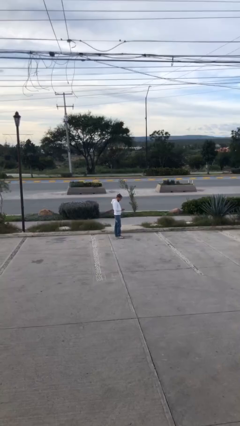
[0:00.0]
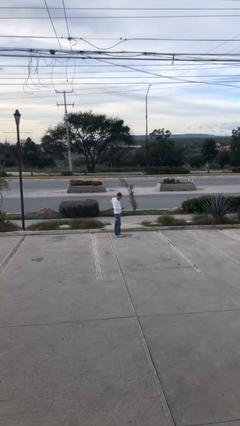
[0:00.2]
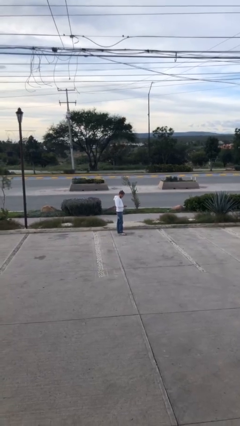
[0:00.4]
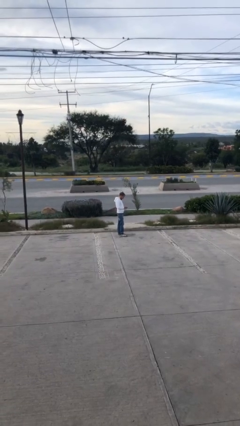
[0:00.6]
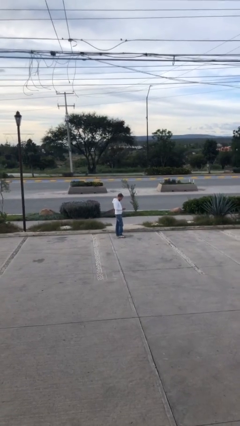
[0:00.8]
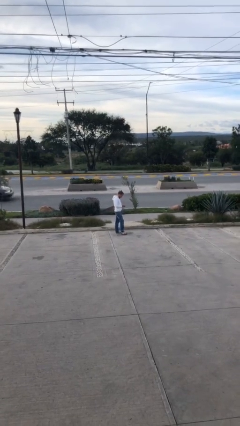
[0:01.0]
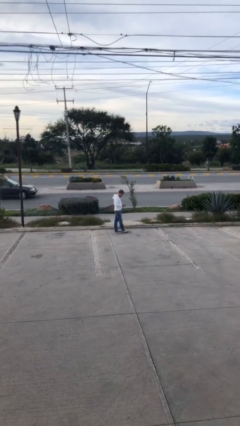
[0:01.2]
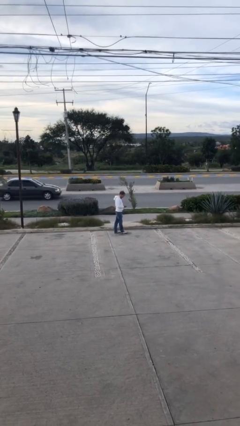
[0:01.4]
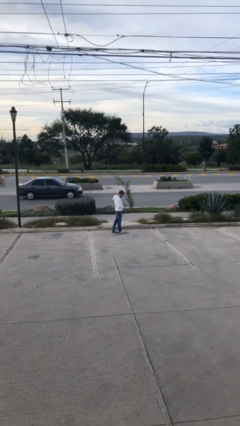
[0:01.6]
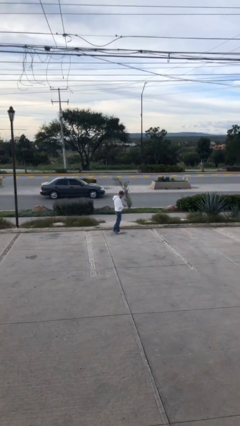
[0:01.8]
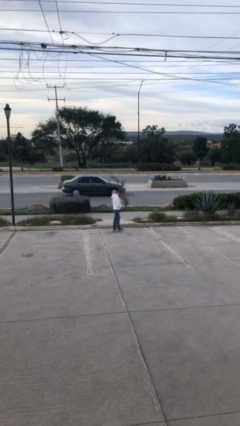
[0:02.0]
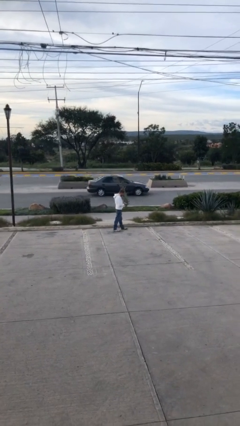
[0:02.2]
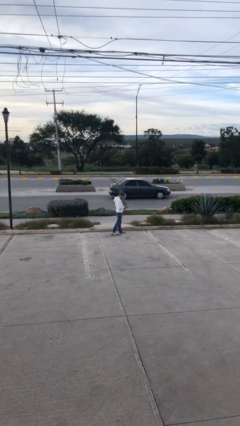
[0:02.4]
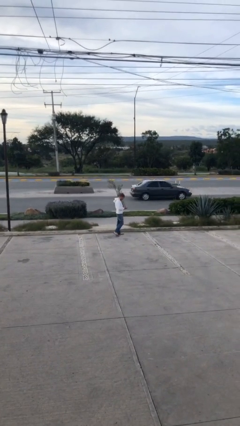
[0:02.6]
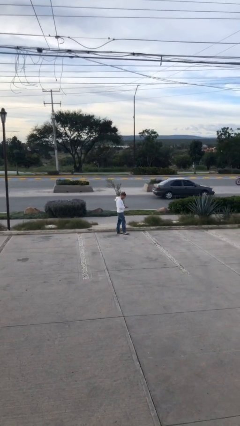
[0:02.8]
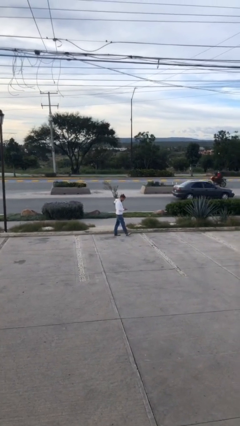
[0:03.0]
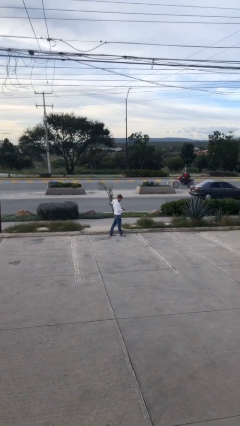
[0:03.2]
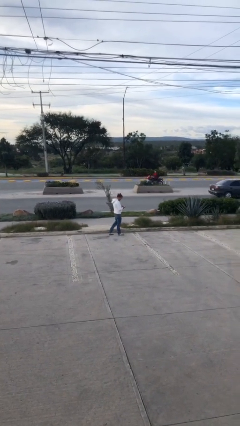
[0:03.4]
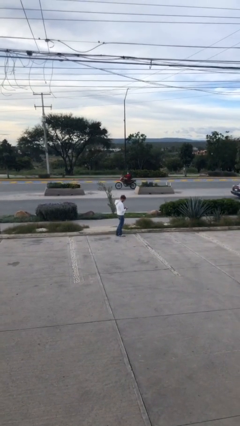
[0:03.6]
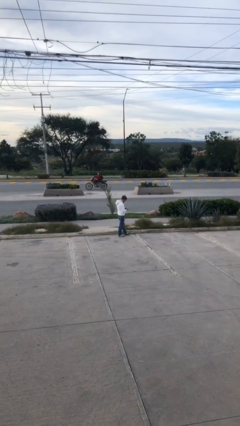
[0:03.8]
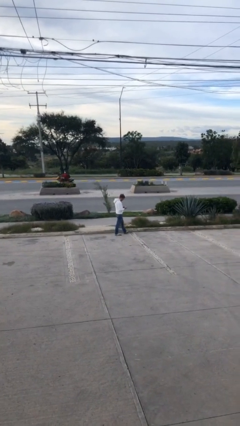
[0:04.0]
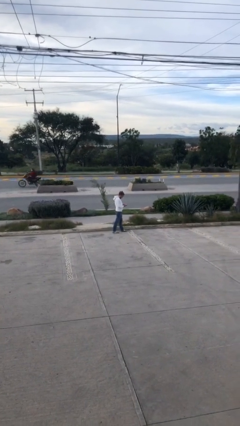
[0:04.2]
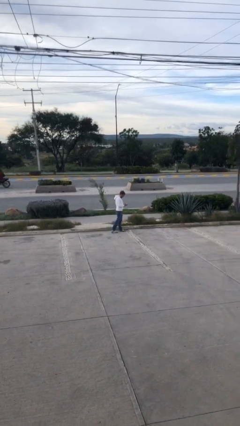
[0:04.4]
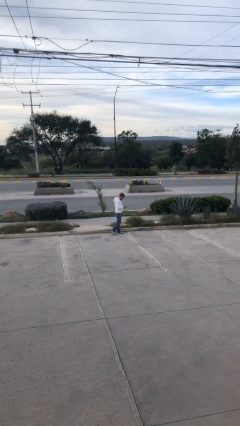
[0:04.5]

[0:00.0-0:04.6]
person texts on phone

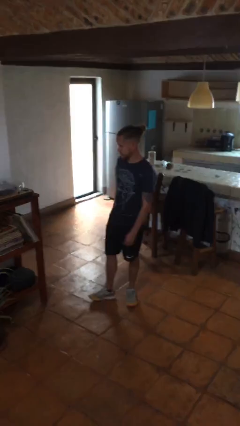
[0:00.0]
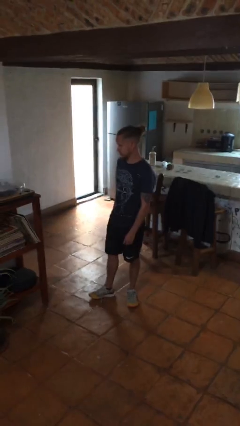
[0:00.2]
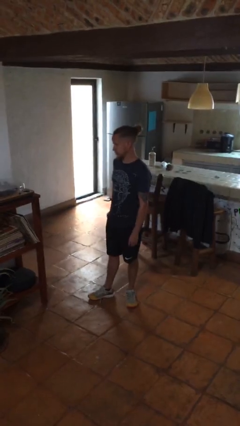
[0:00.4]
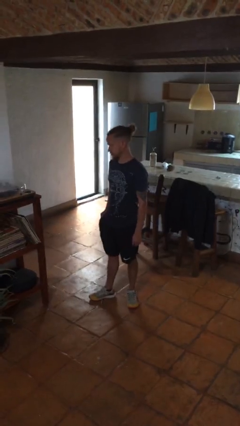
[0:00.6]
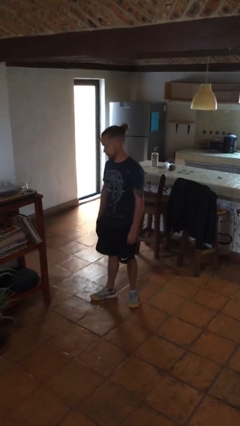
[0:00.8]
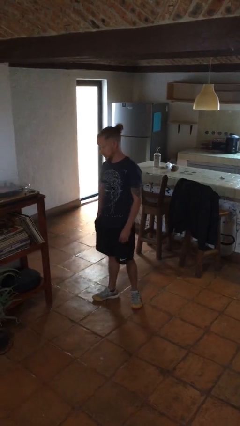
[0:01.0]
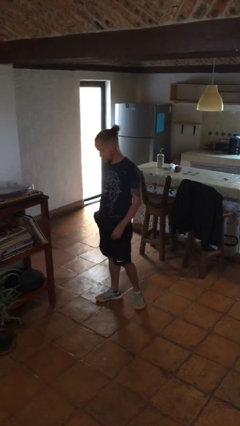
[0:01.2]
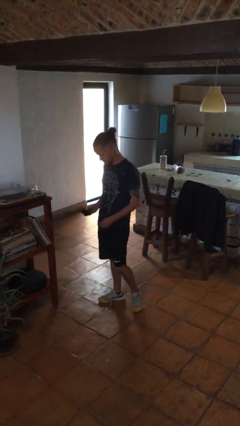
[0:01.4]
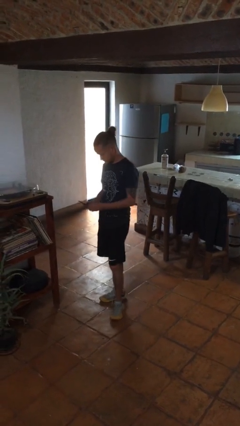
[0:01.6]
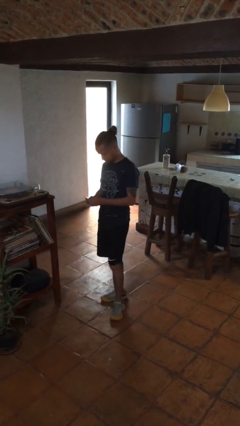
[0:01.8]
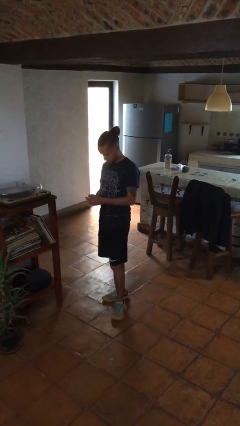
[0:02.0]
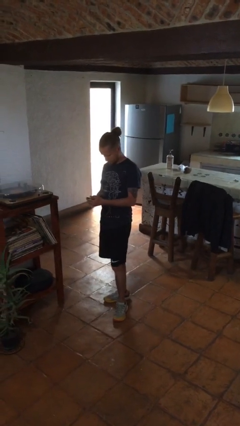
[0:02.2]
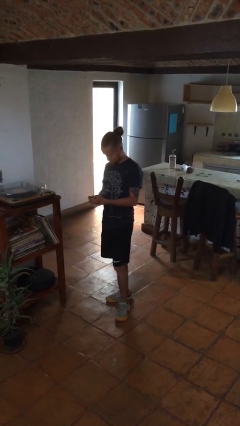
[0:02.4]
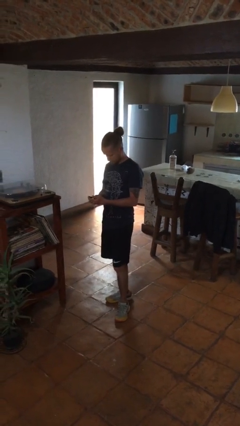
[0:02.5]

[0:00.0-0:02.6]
person takes phone from pocket

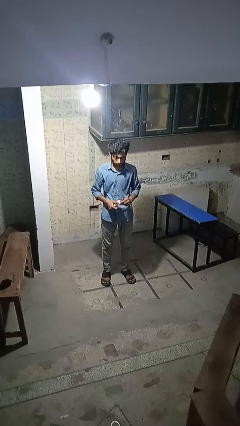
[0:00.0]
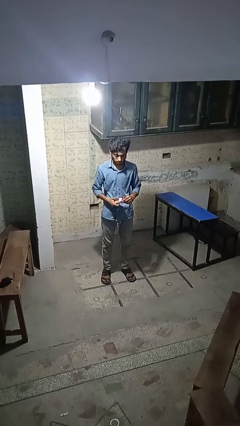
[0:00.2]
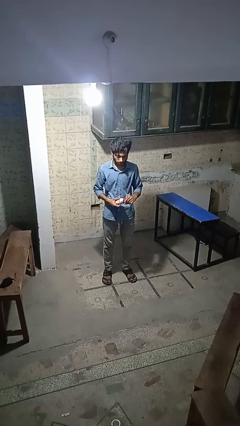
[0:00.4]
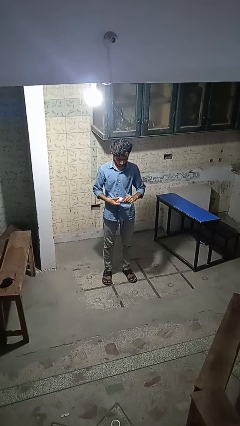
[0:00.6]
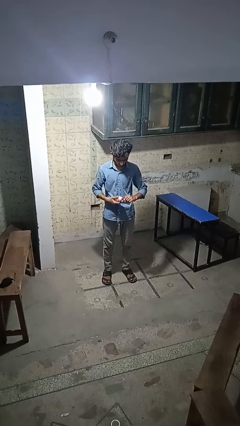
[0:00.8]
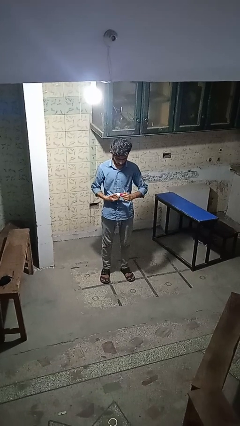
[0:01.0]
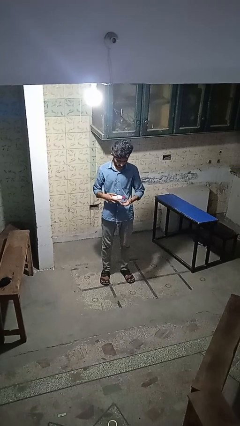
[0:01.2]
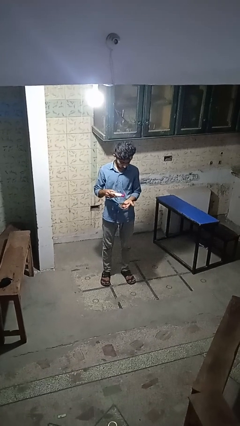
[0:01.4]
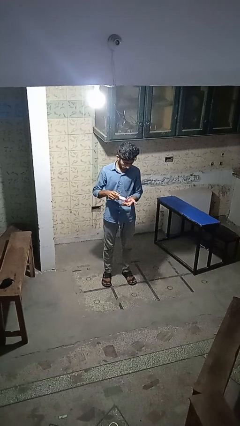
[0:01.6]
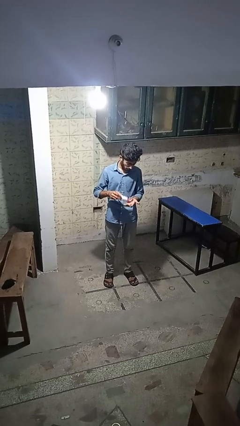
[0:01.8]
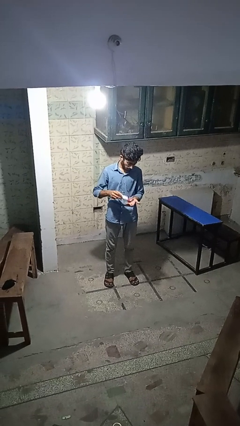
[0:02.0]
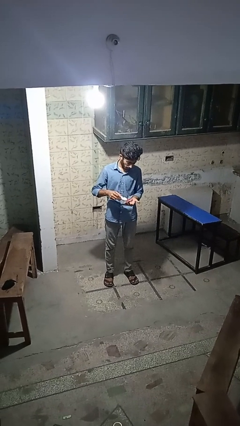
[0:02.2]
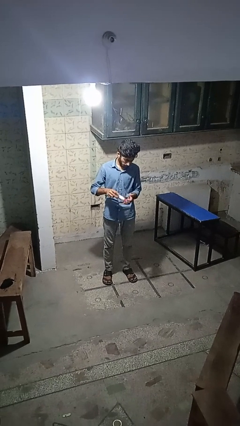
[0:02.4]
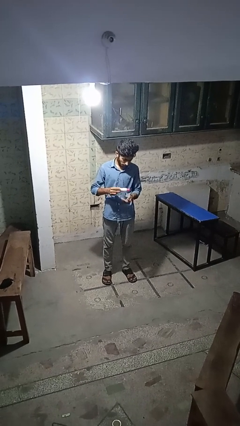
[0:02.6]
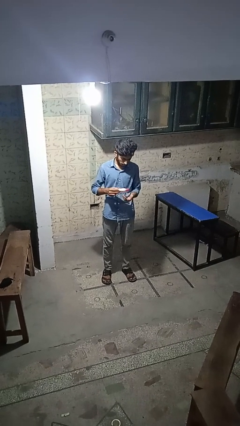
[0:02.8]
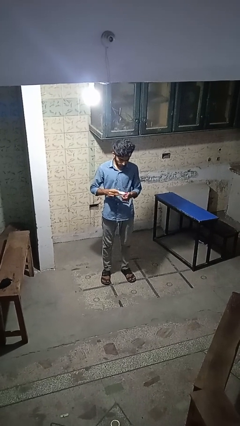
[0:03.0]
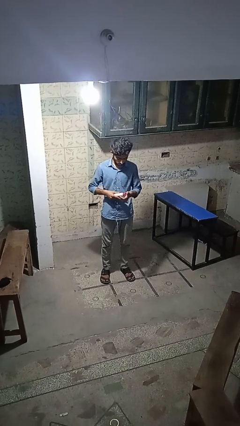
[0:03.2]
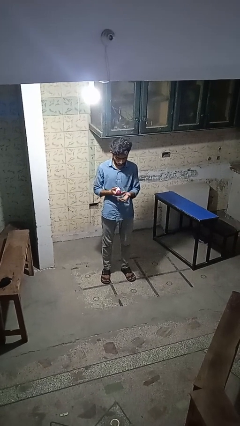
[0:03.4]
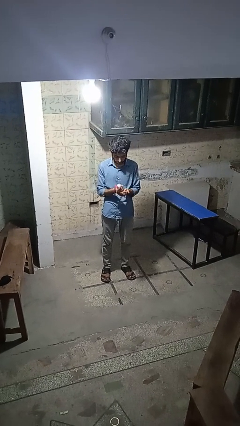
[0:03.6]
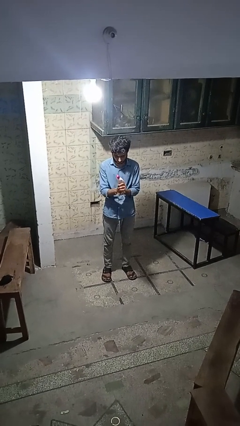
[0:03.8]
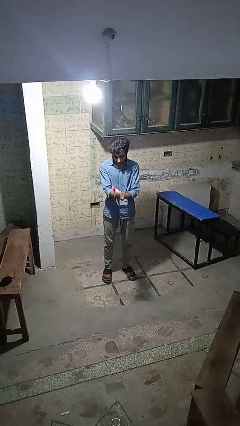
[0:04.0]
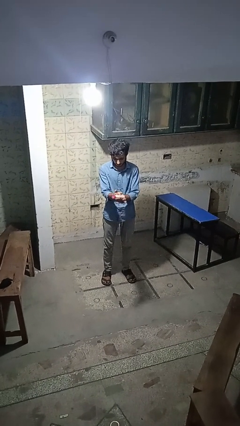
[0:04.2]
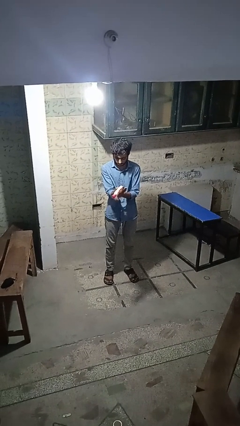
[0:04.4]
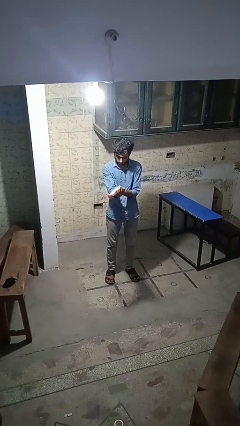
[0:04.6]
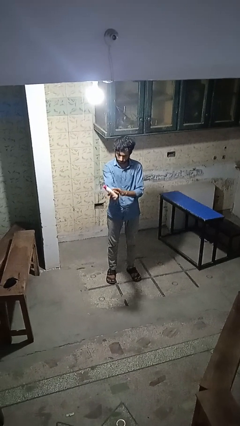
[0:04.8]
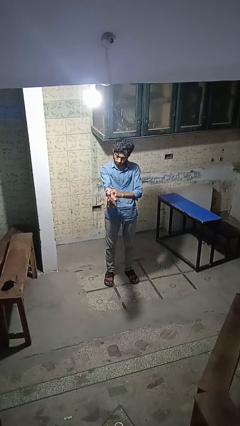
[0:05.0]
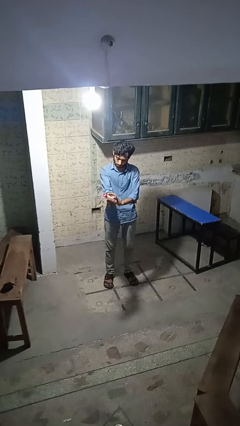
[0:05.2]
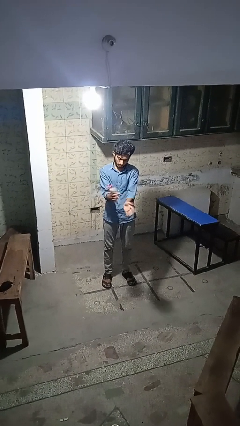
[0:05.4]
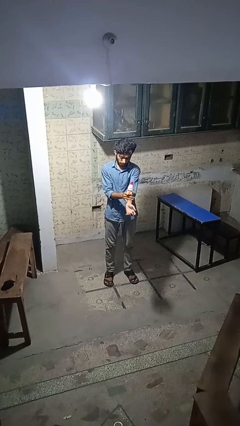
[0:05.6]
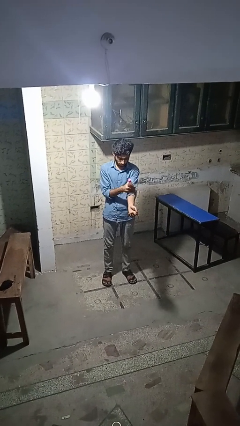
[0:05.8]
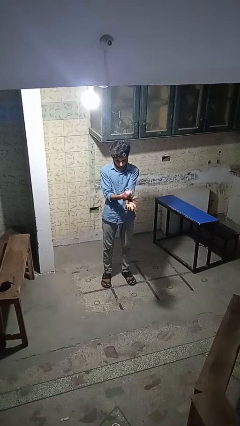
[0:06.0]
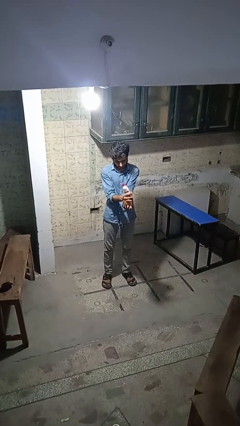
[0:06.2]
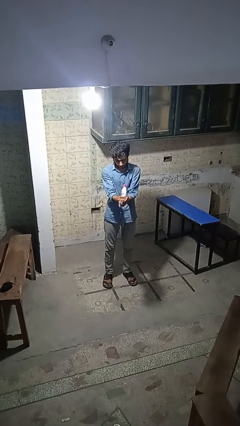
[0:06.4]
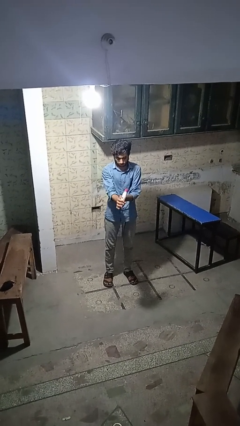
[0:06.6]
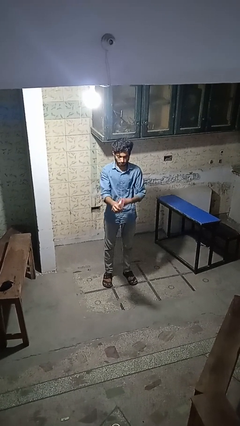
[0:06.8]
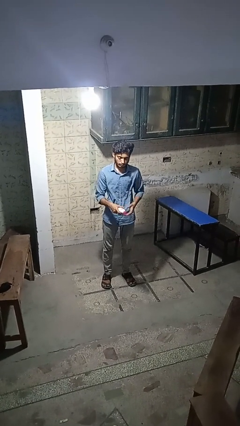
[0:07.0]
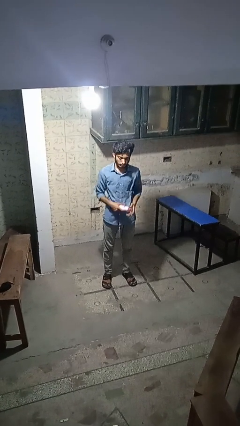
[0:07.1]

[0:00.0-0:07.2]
person applies sunscreen

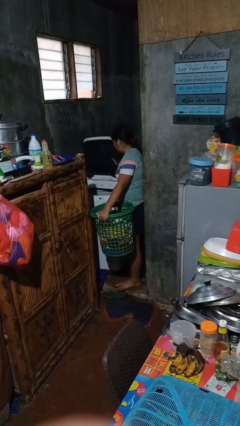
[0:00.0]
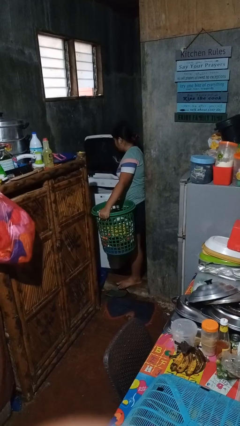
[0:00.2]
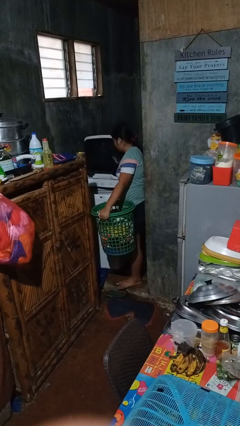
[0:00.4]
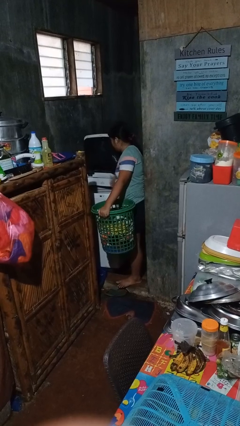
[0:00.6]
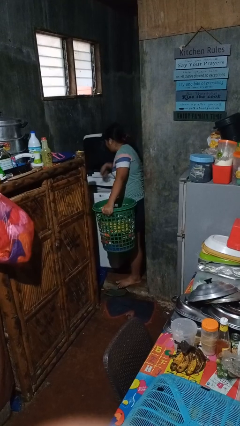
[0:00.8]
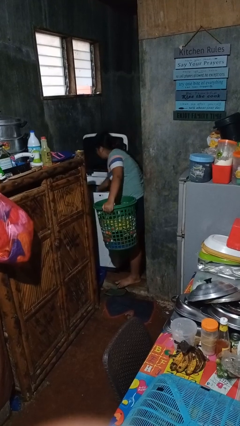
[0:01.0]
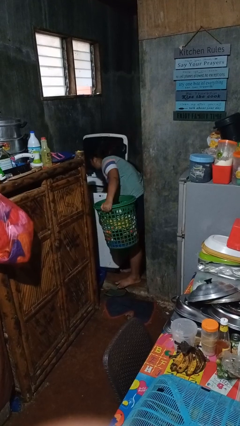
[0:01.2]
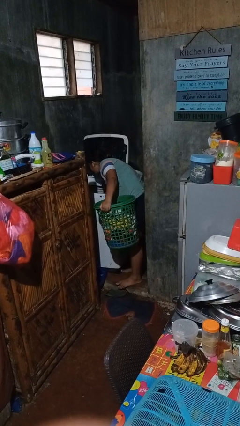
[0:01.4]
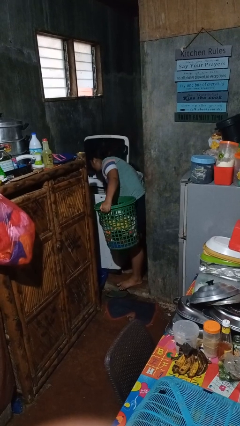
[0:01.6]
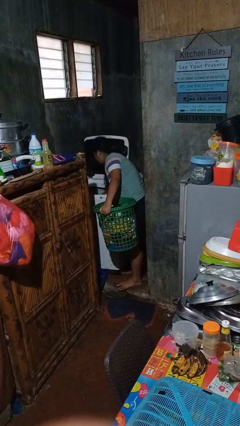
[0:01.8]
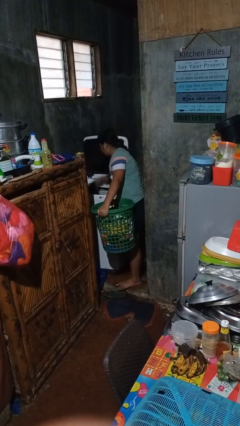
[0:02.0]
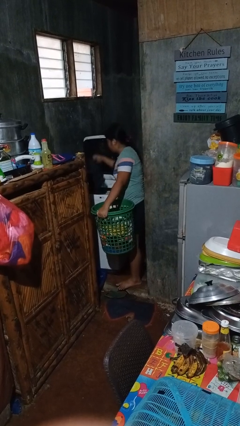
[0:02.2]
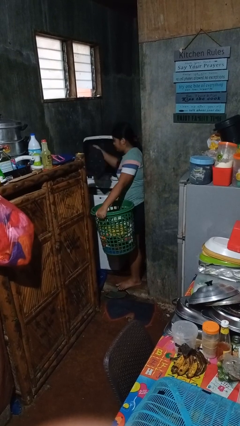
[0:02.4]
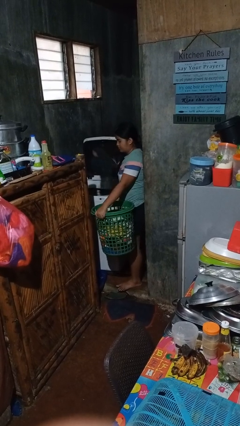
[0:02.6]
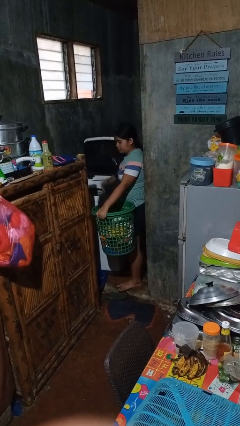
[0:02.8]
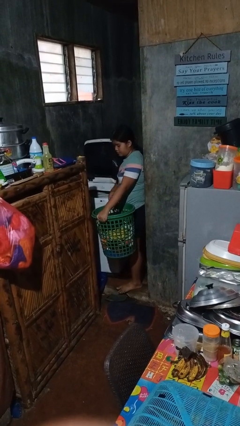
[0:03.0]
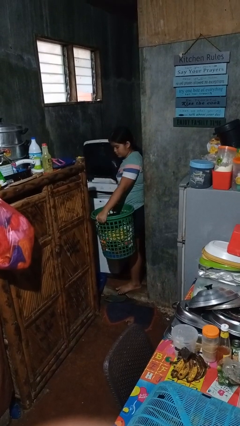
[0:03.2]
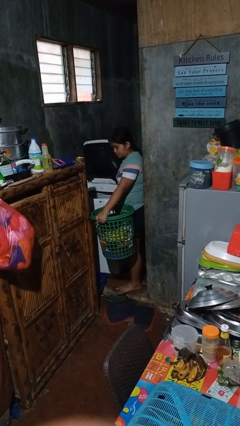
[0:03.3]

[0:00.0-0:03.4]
person unloads clotheswasher

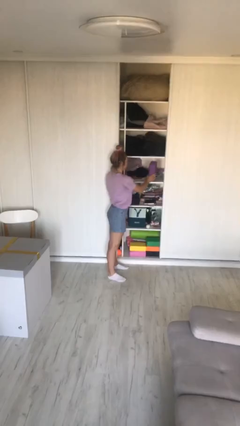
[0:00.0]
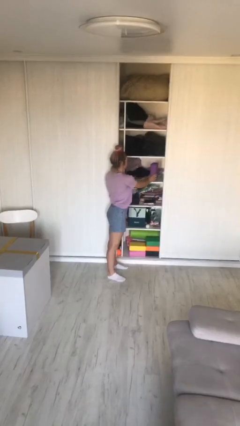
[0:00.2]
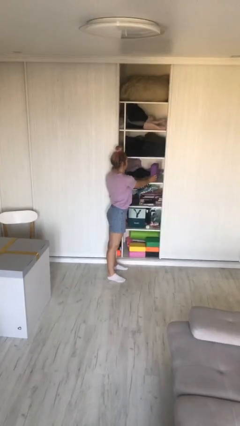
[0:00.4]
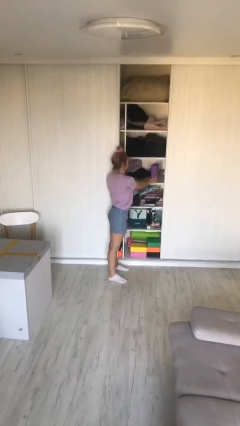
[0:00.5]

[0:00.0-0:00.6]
person puts down object into cabinet
